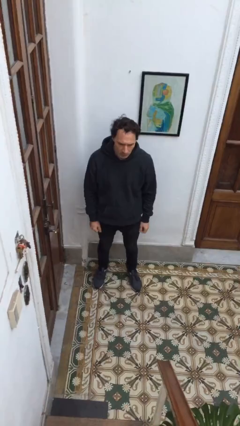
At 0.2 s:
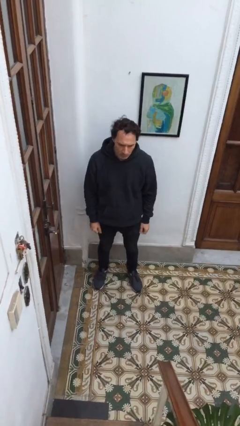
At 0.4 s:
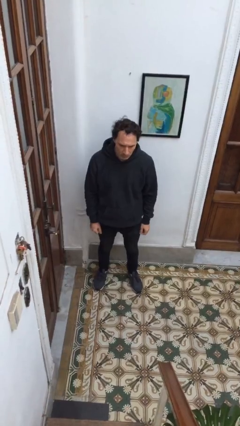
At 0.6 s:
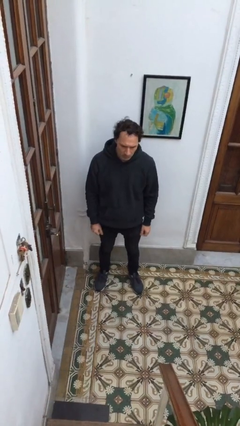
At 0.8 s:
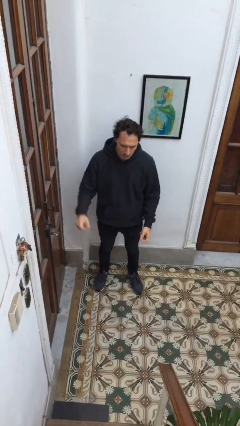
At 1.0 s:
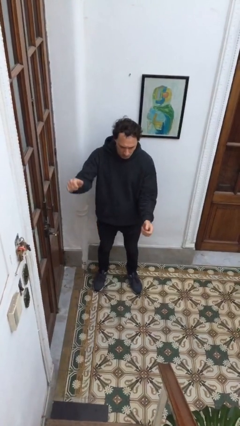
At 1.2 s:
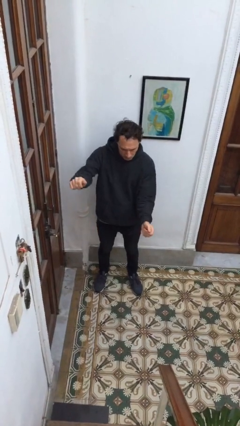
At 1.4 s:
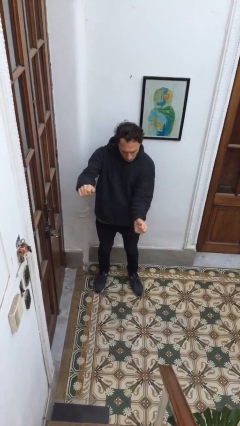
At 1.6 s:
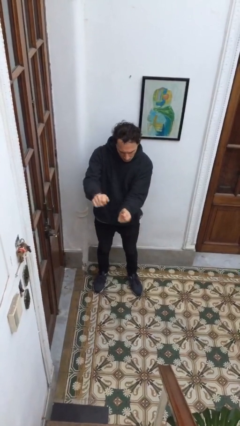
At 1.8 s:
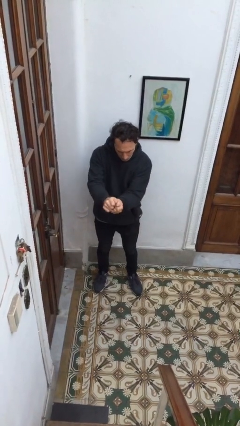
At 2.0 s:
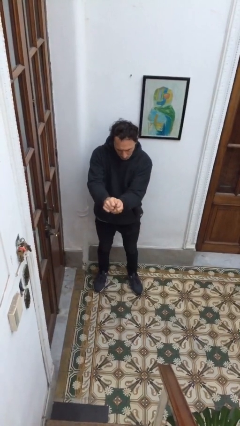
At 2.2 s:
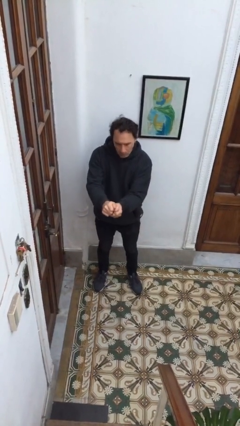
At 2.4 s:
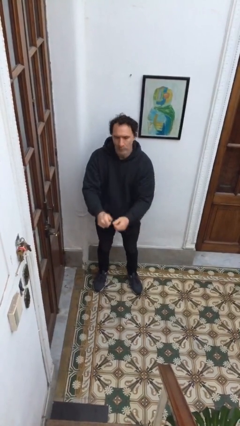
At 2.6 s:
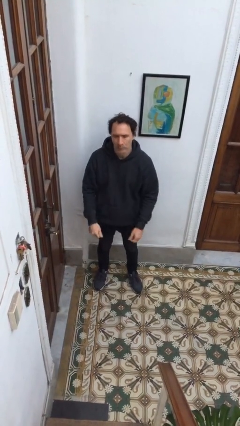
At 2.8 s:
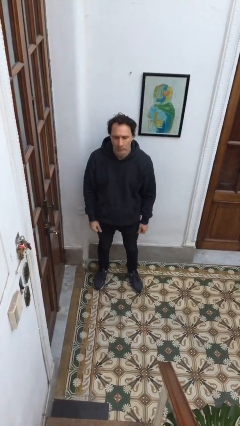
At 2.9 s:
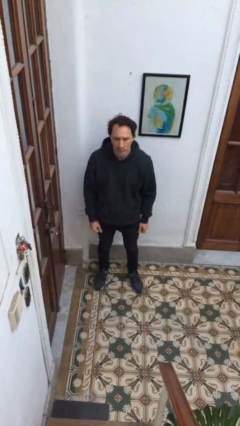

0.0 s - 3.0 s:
person gestures zoom out

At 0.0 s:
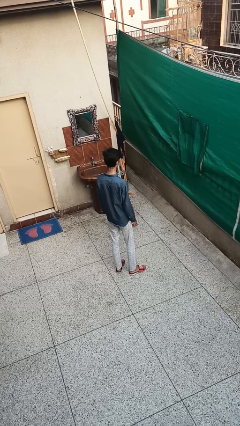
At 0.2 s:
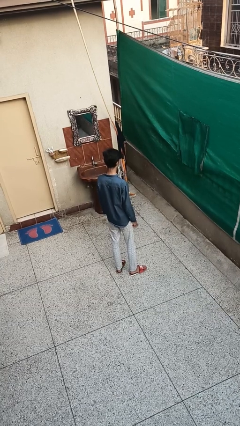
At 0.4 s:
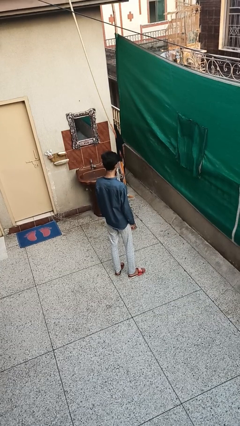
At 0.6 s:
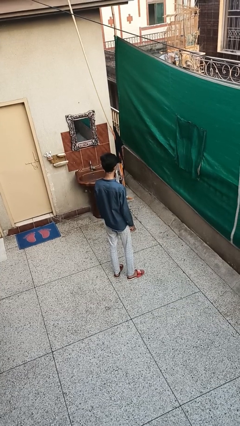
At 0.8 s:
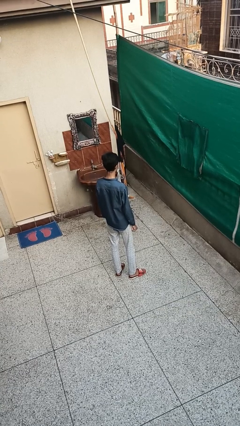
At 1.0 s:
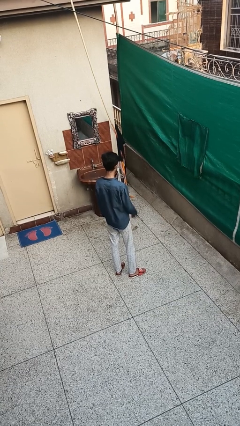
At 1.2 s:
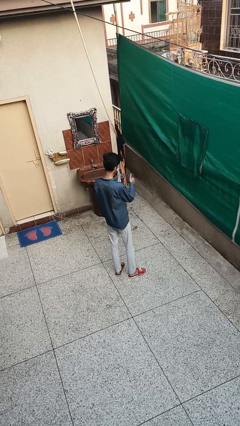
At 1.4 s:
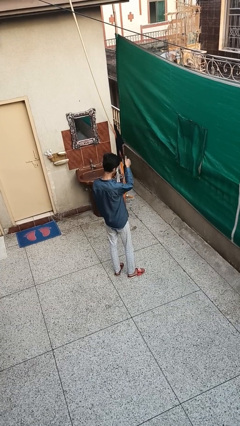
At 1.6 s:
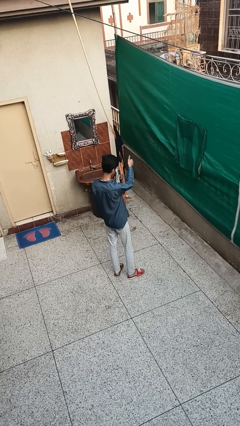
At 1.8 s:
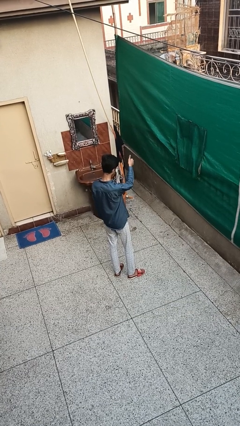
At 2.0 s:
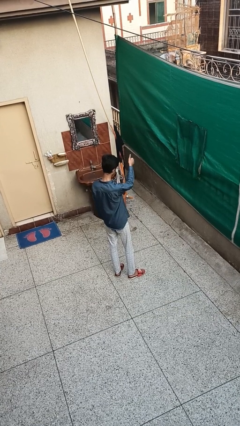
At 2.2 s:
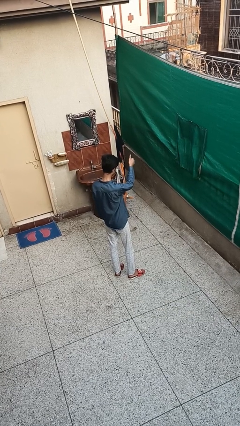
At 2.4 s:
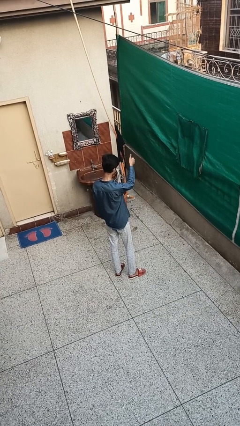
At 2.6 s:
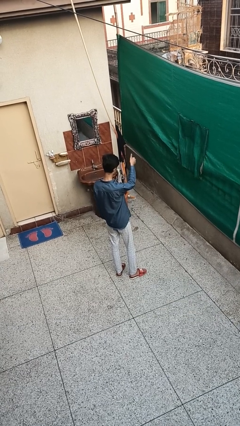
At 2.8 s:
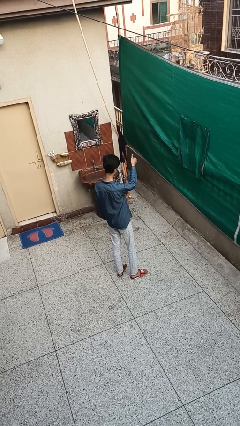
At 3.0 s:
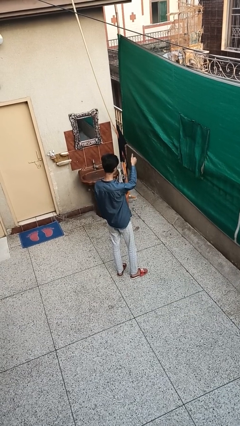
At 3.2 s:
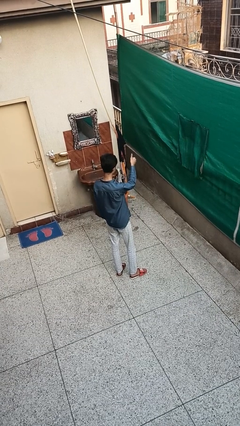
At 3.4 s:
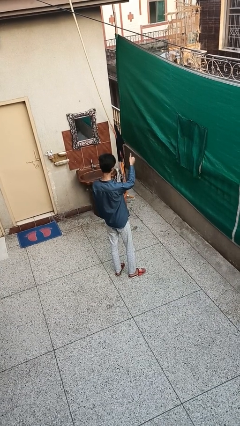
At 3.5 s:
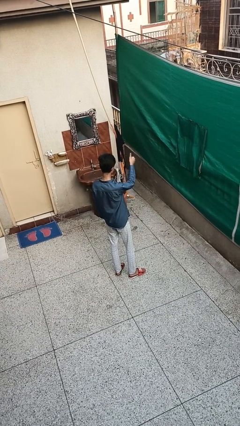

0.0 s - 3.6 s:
person gestures thumbs up

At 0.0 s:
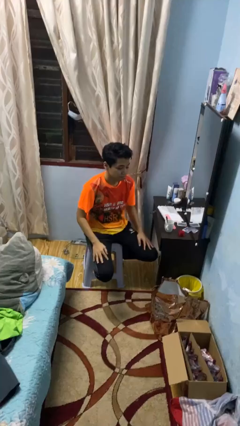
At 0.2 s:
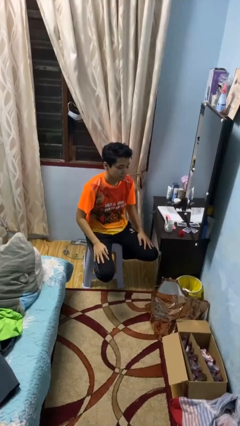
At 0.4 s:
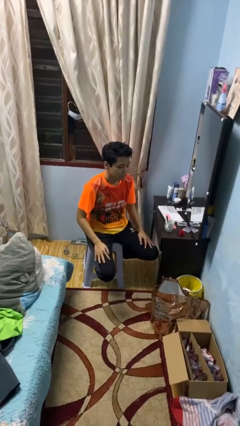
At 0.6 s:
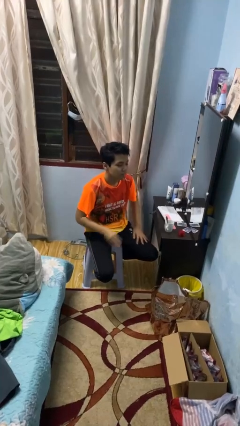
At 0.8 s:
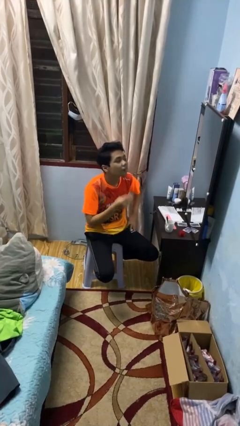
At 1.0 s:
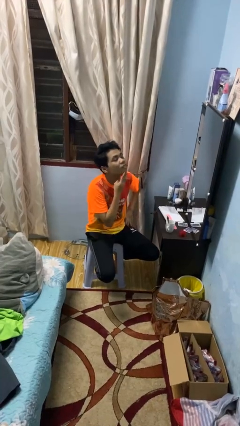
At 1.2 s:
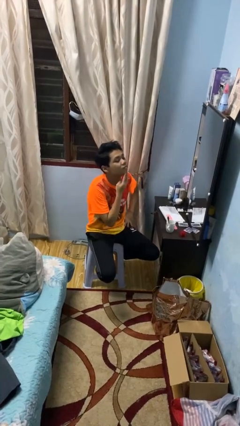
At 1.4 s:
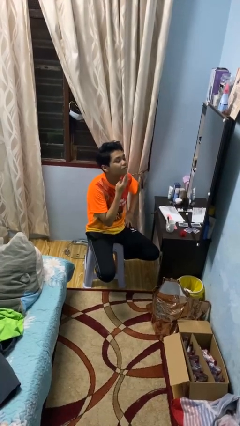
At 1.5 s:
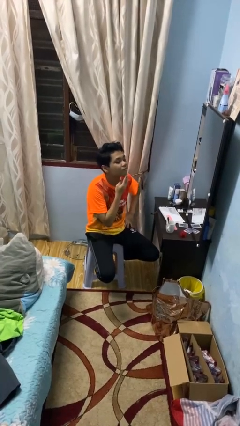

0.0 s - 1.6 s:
person strokes chin

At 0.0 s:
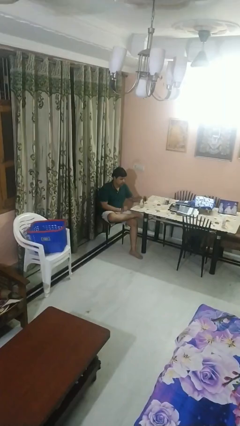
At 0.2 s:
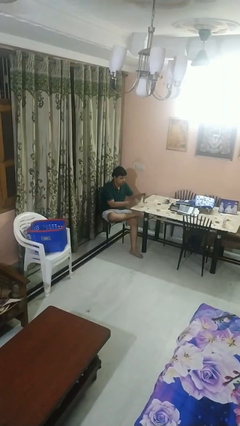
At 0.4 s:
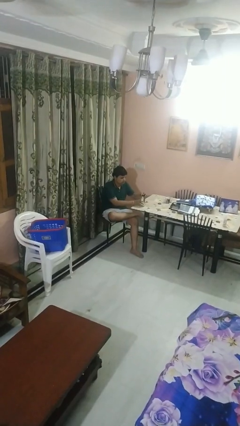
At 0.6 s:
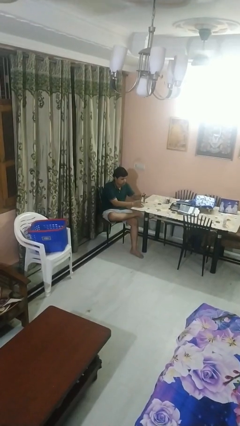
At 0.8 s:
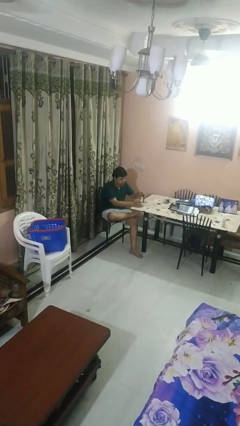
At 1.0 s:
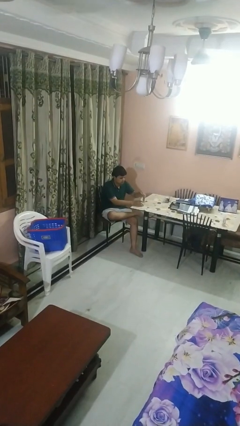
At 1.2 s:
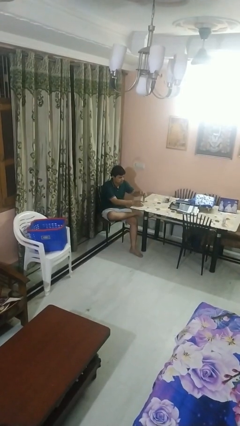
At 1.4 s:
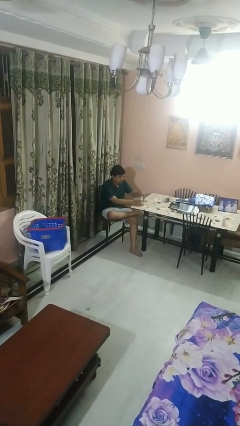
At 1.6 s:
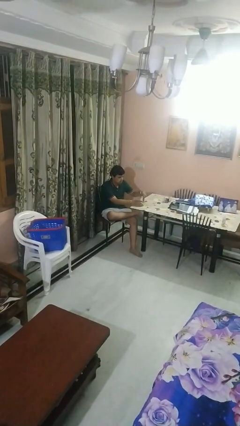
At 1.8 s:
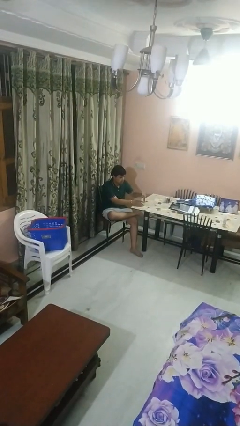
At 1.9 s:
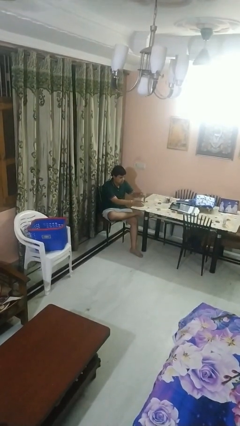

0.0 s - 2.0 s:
person screws lid to bottle

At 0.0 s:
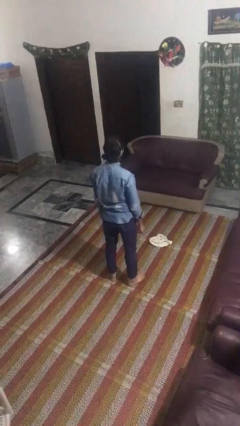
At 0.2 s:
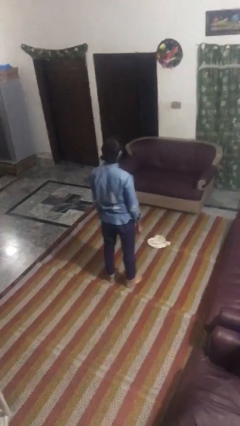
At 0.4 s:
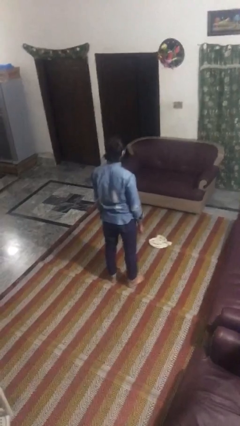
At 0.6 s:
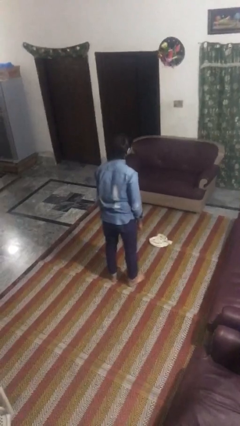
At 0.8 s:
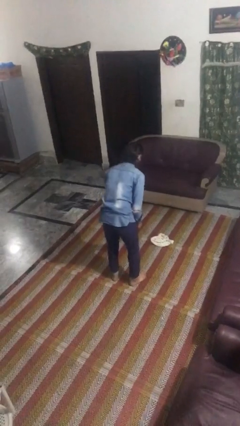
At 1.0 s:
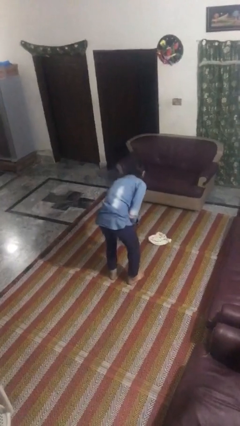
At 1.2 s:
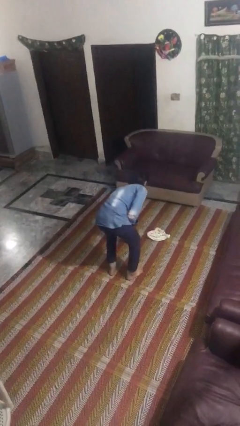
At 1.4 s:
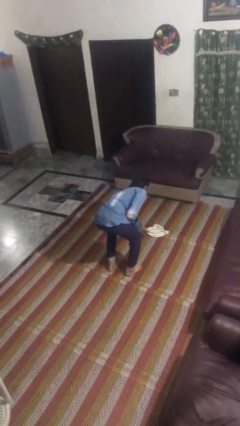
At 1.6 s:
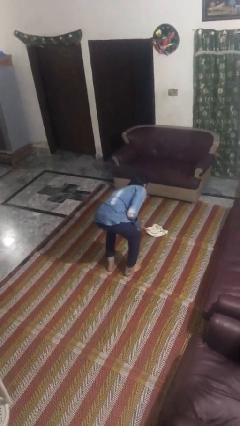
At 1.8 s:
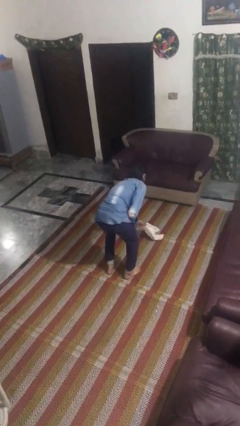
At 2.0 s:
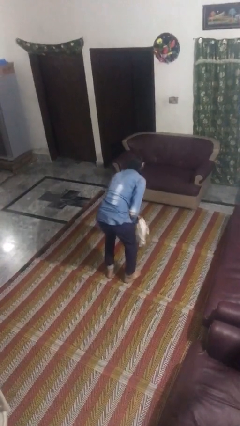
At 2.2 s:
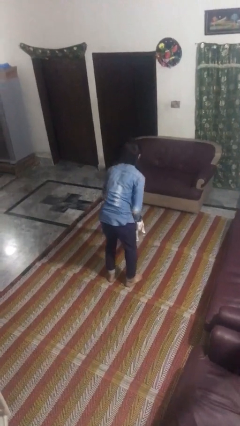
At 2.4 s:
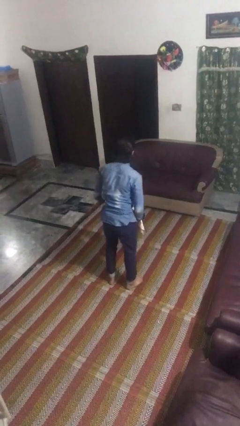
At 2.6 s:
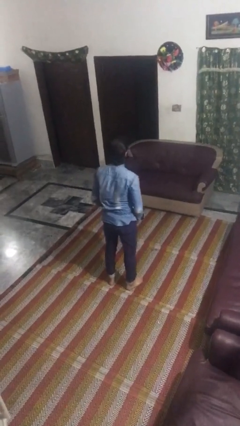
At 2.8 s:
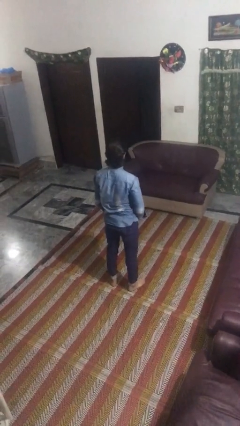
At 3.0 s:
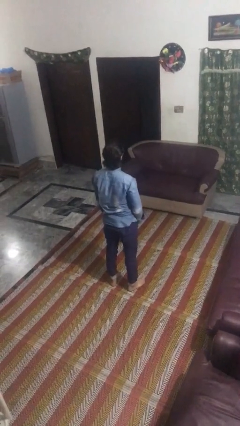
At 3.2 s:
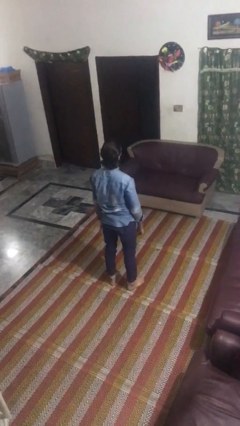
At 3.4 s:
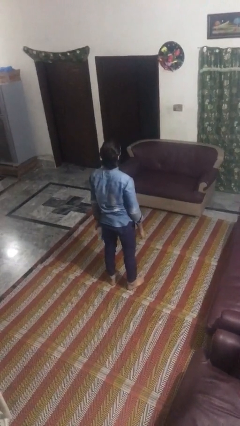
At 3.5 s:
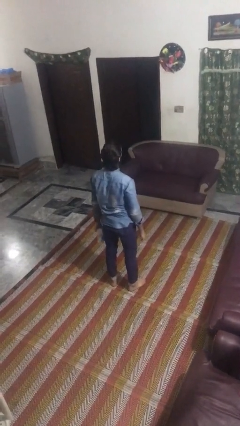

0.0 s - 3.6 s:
person picks up object from floor

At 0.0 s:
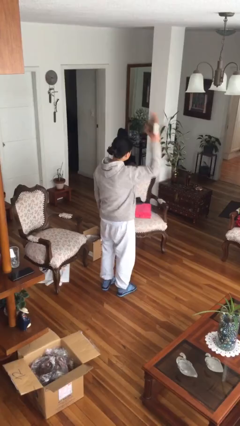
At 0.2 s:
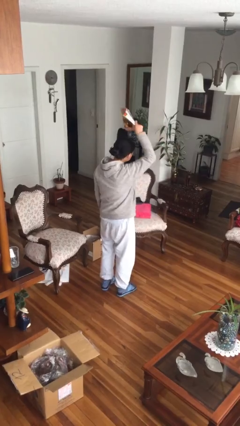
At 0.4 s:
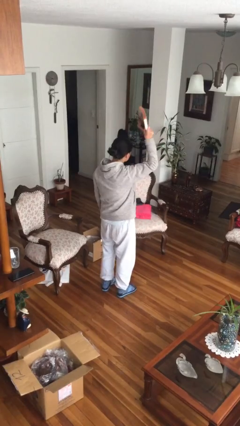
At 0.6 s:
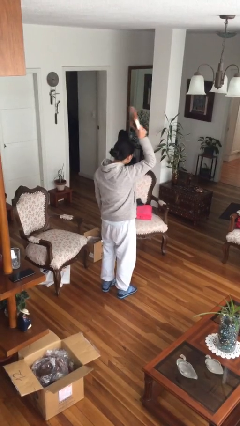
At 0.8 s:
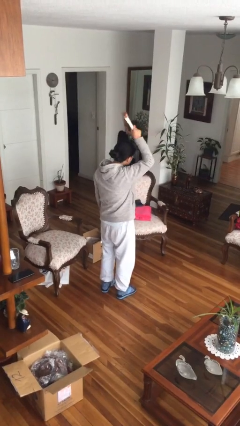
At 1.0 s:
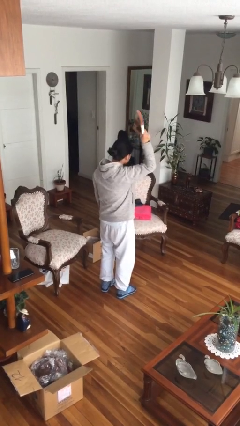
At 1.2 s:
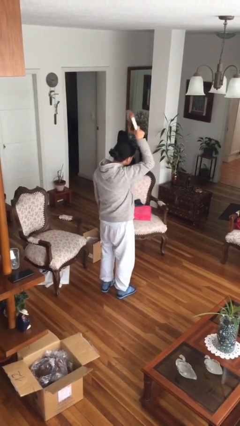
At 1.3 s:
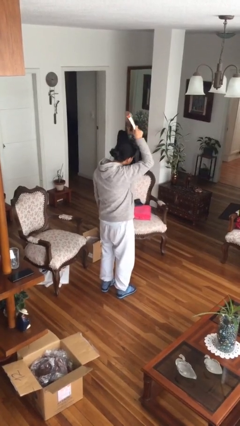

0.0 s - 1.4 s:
person holds object above head

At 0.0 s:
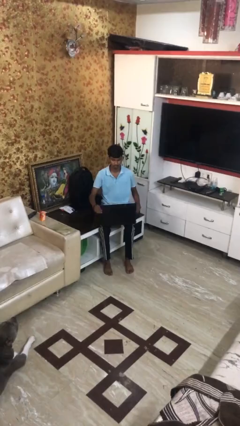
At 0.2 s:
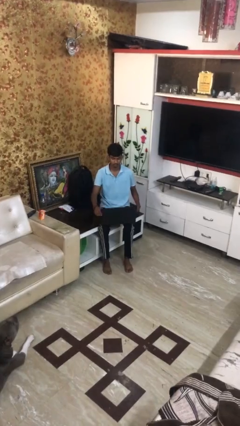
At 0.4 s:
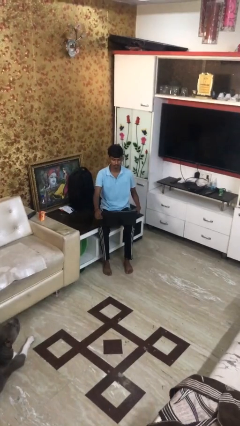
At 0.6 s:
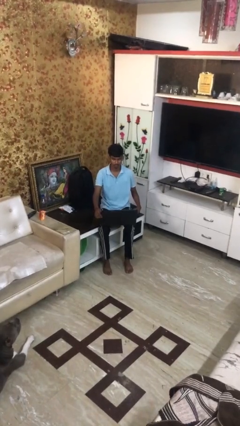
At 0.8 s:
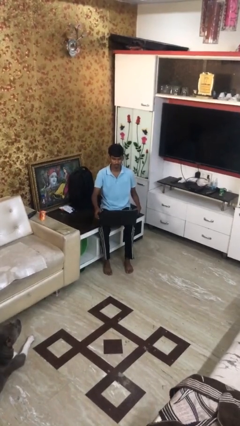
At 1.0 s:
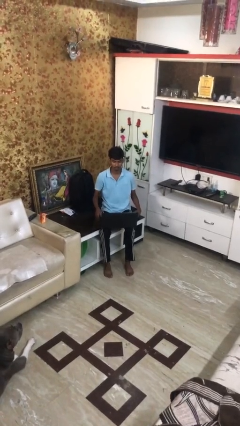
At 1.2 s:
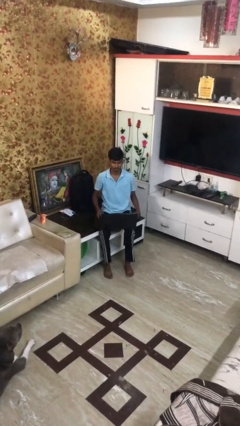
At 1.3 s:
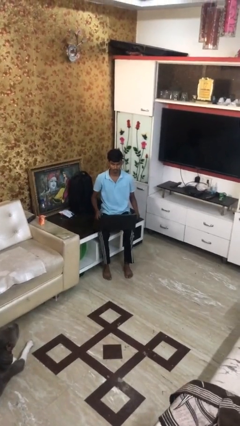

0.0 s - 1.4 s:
person opens laptop

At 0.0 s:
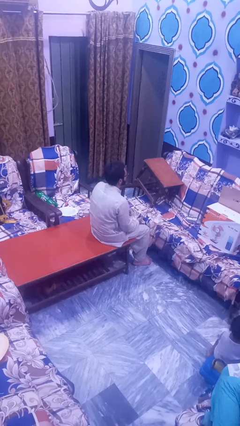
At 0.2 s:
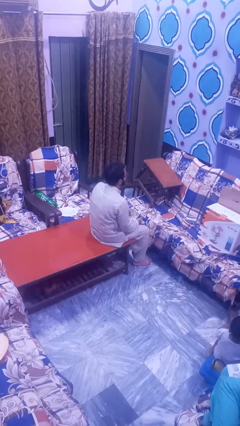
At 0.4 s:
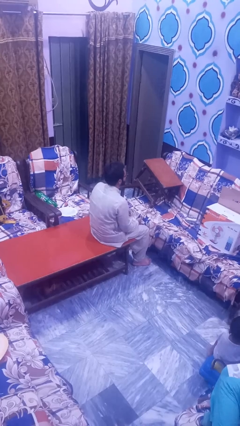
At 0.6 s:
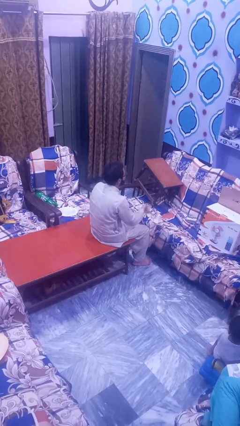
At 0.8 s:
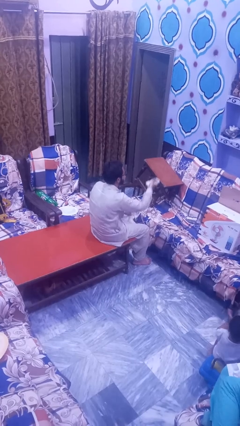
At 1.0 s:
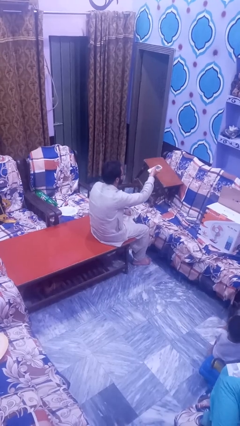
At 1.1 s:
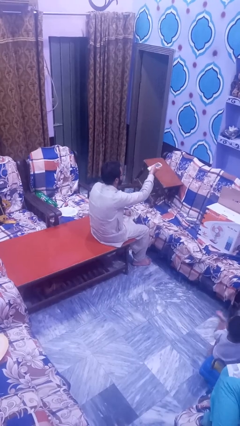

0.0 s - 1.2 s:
person uses television remote
